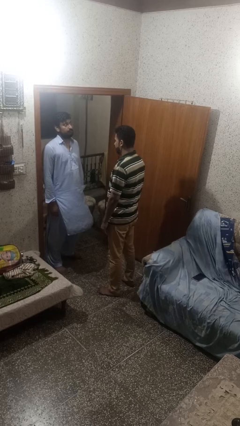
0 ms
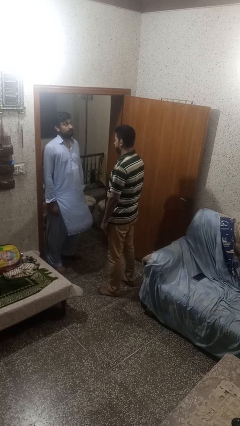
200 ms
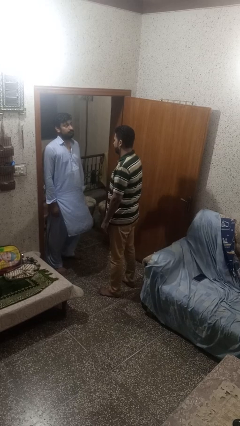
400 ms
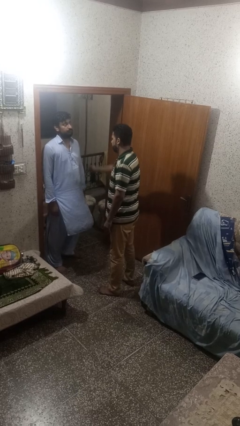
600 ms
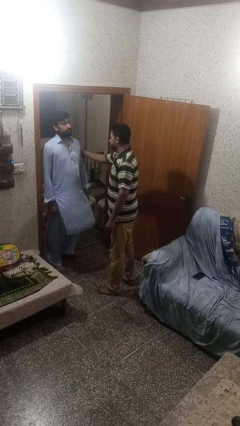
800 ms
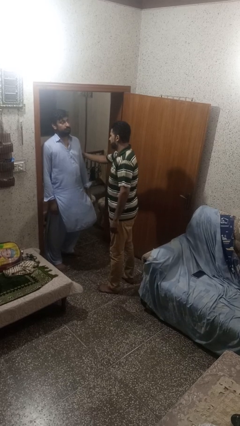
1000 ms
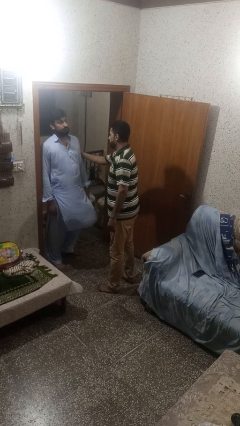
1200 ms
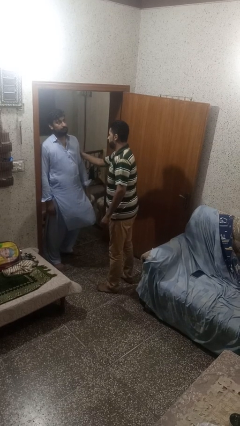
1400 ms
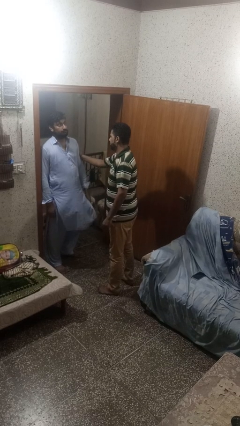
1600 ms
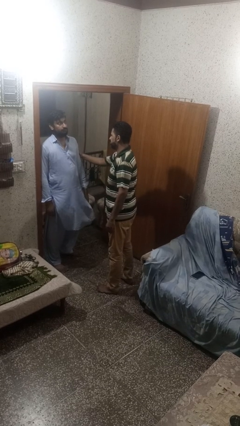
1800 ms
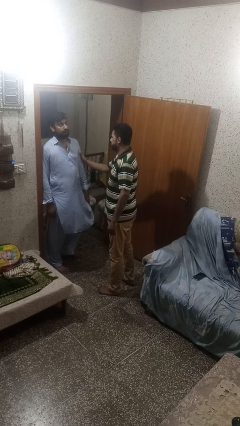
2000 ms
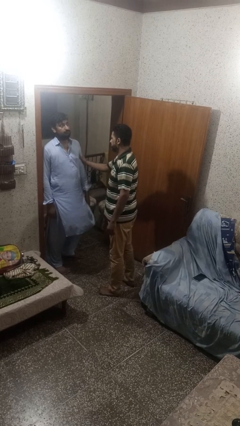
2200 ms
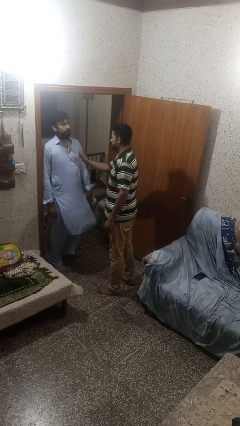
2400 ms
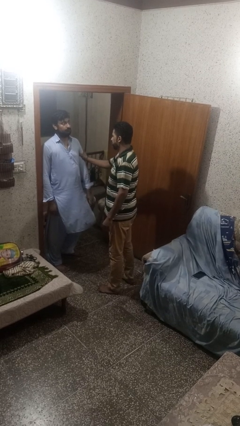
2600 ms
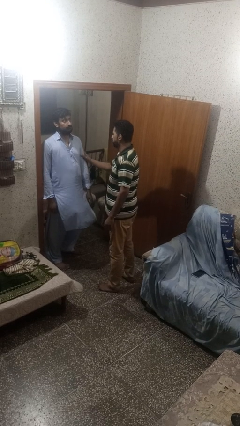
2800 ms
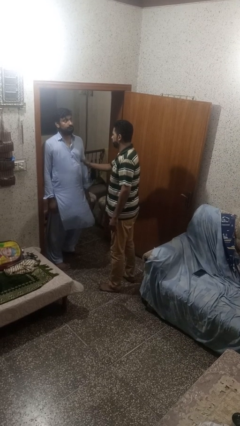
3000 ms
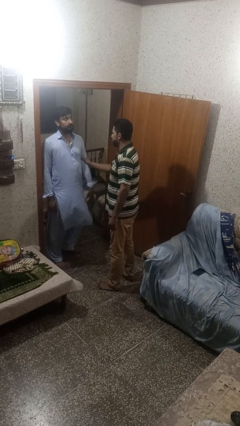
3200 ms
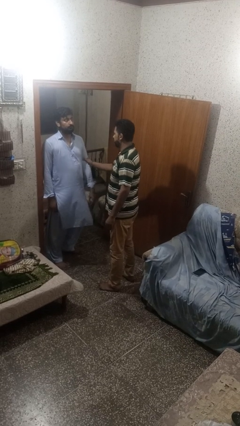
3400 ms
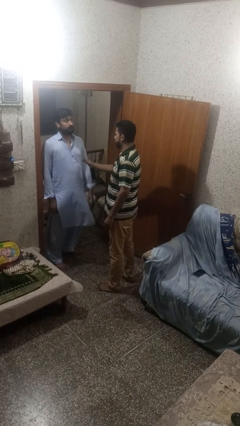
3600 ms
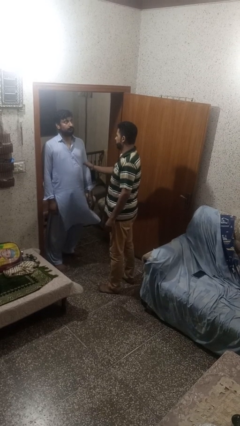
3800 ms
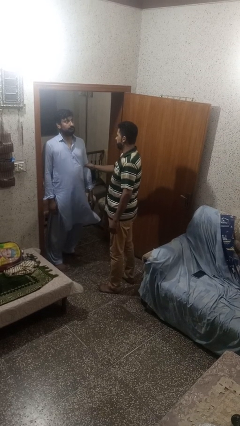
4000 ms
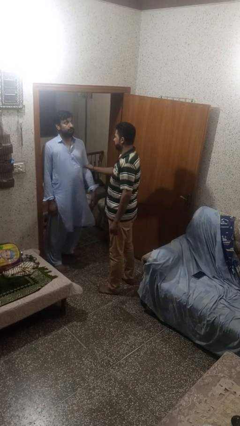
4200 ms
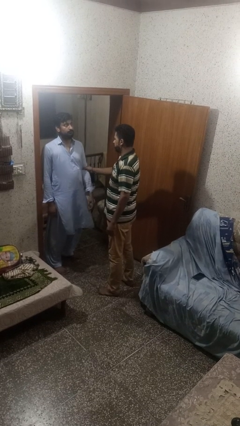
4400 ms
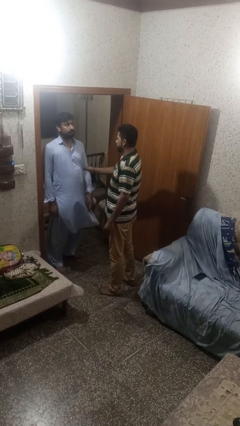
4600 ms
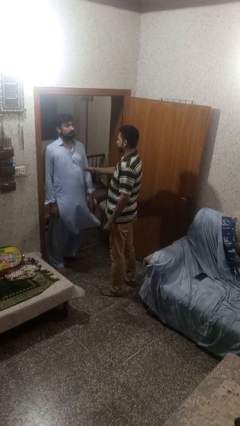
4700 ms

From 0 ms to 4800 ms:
person grabs person by bicep

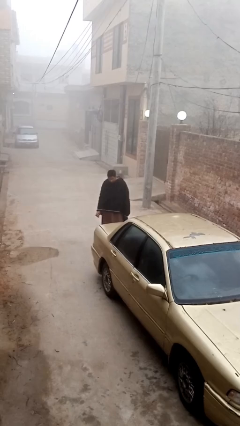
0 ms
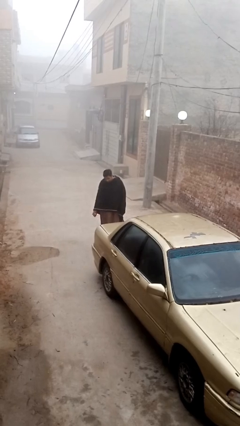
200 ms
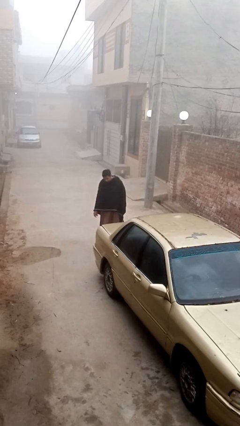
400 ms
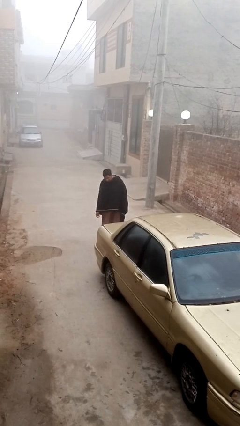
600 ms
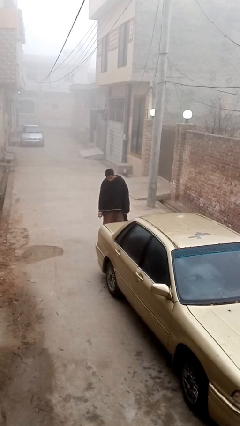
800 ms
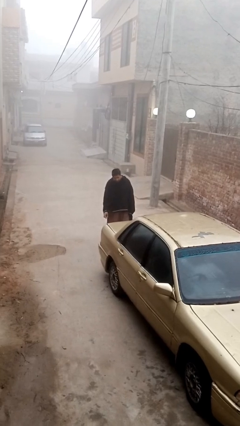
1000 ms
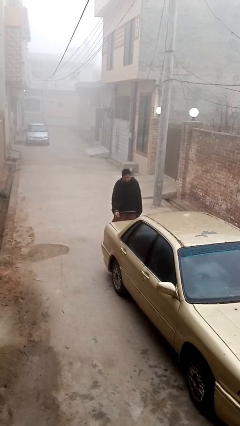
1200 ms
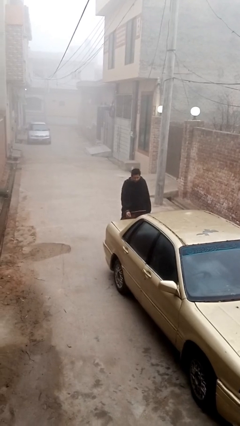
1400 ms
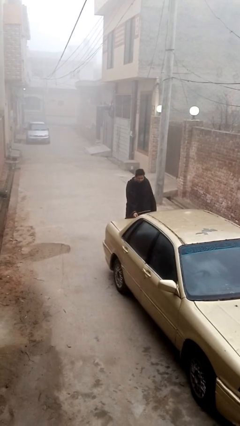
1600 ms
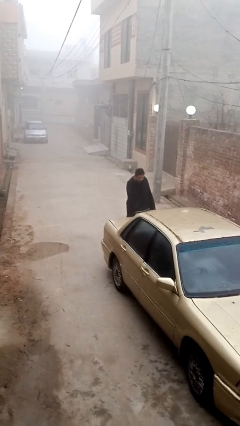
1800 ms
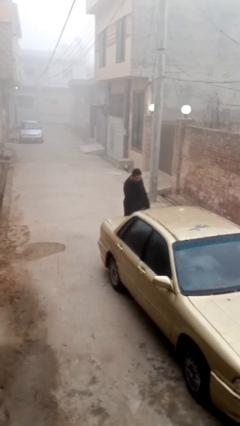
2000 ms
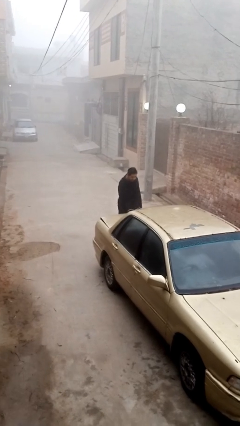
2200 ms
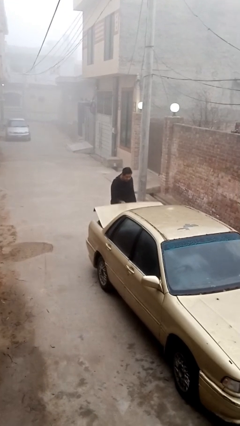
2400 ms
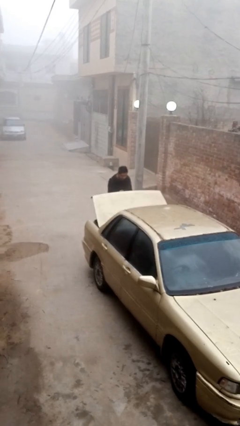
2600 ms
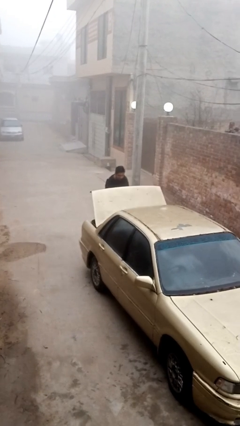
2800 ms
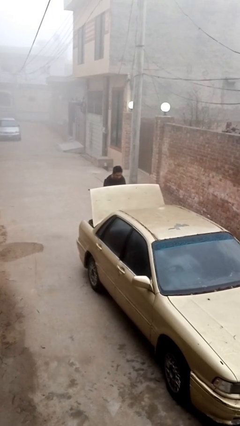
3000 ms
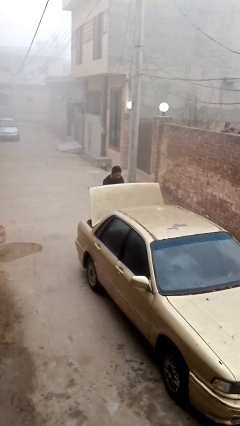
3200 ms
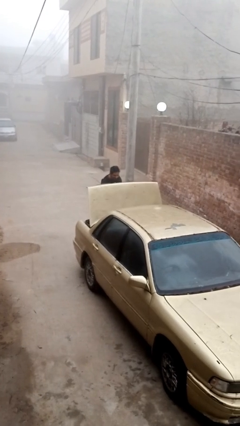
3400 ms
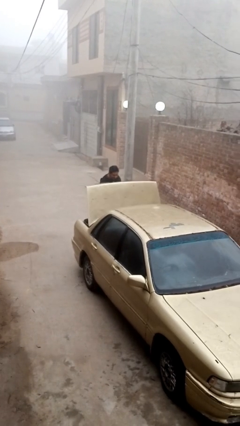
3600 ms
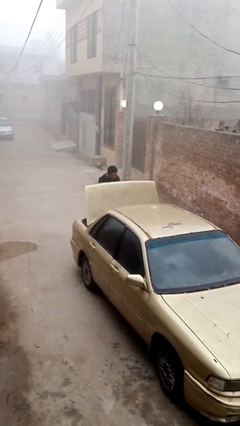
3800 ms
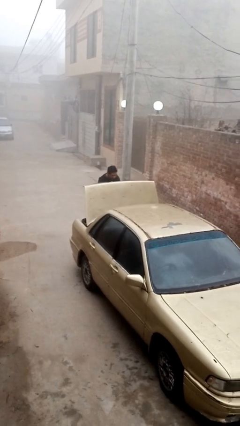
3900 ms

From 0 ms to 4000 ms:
person opens car trunk

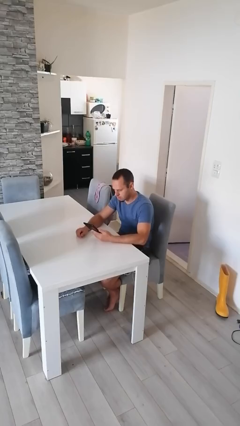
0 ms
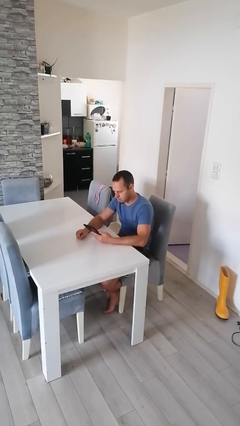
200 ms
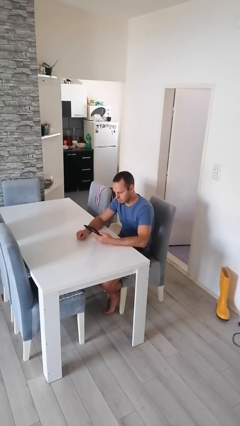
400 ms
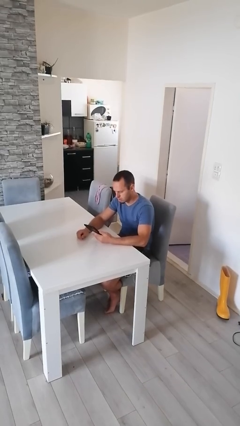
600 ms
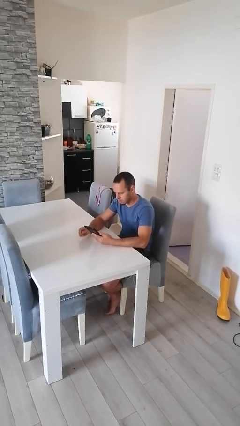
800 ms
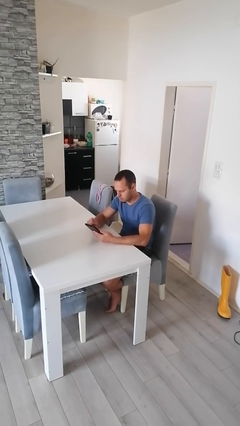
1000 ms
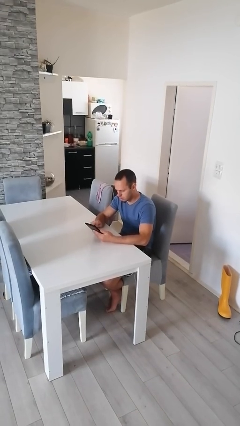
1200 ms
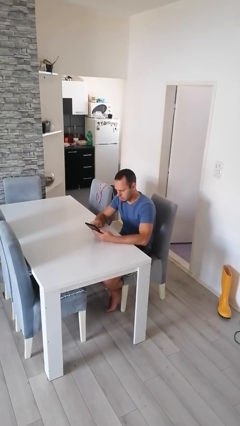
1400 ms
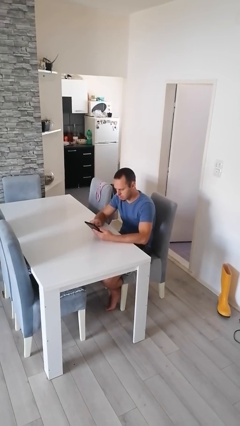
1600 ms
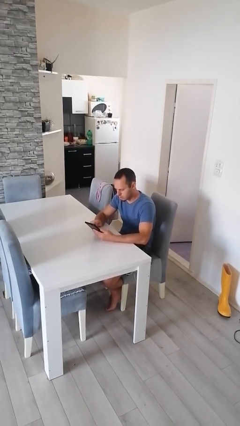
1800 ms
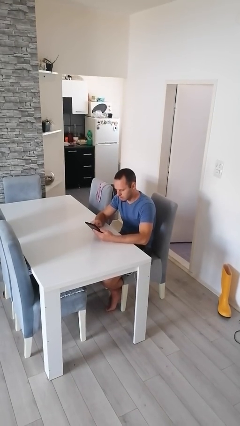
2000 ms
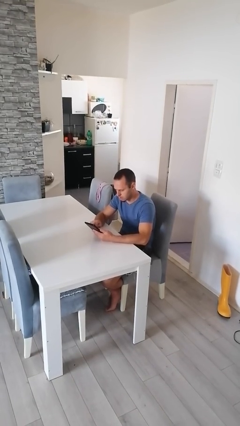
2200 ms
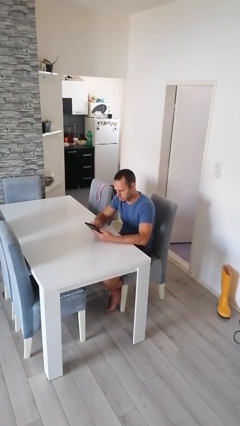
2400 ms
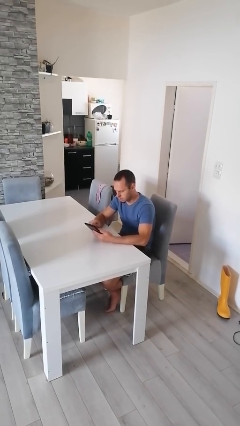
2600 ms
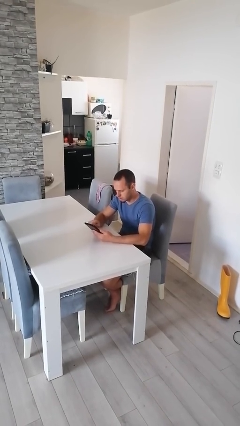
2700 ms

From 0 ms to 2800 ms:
person interacts with tablet

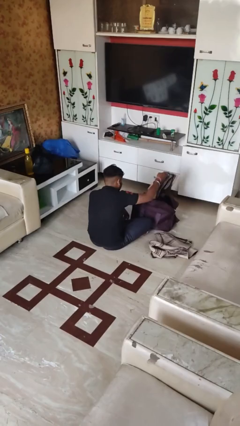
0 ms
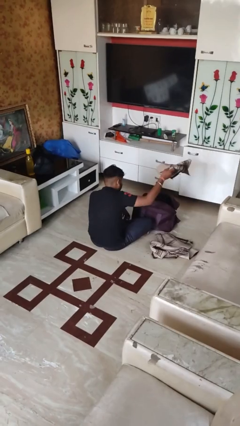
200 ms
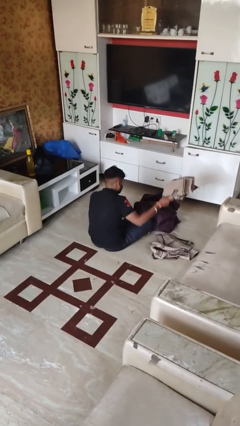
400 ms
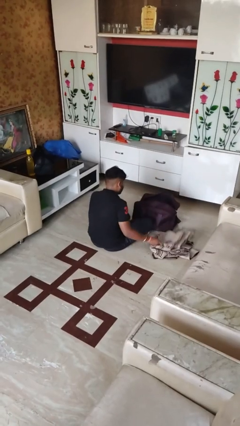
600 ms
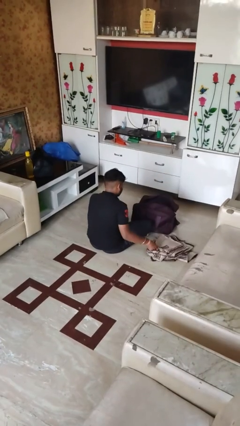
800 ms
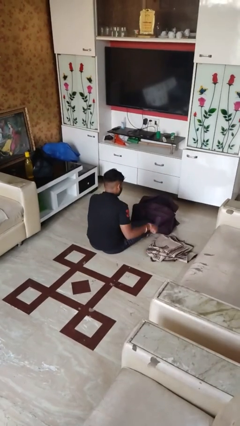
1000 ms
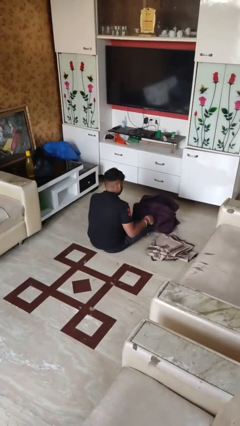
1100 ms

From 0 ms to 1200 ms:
person unloads clothes from suitcase

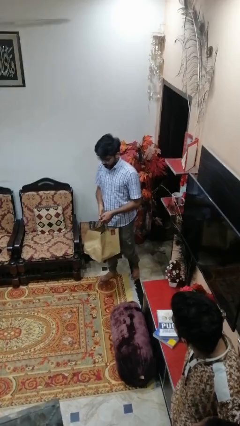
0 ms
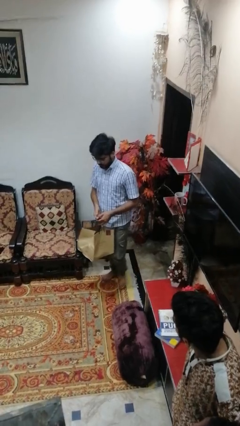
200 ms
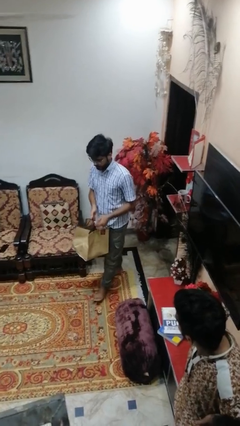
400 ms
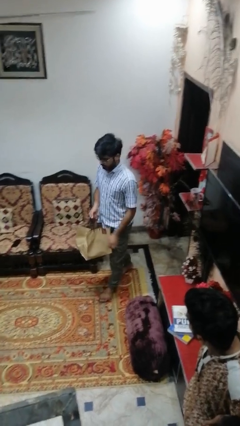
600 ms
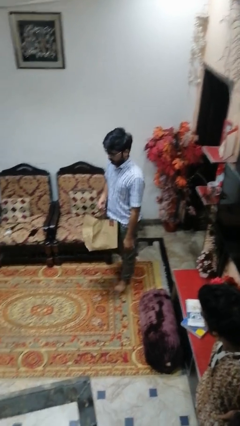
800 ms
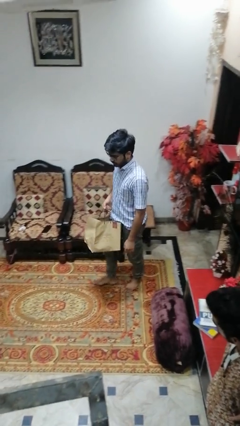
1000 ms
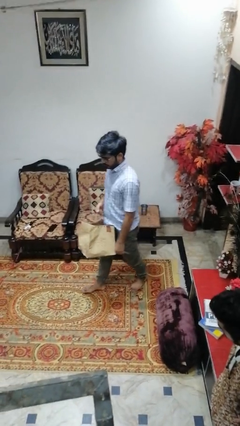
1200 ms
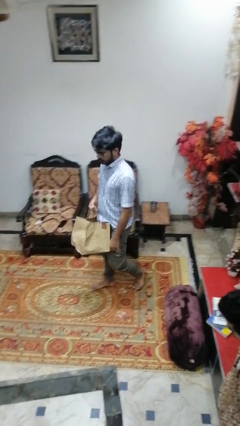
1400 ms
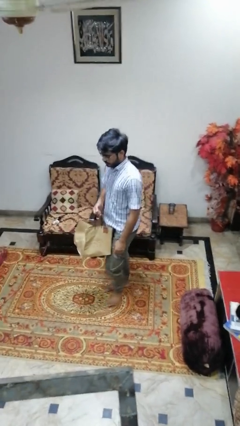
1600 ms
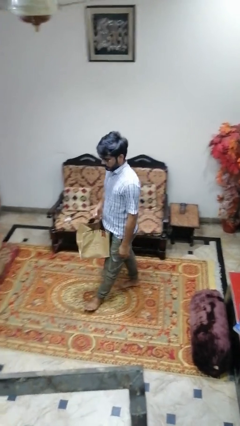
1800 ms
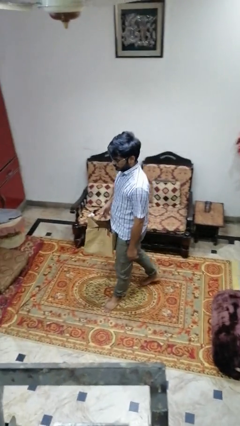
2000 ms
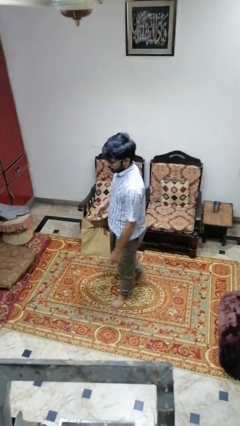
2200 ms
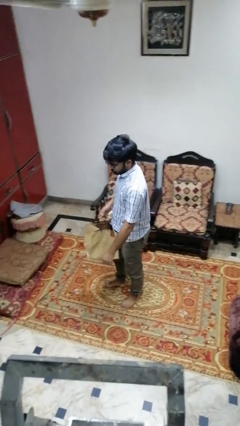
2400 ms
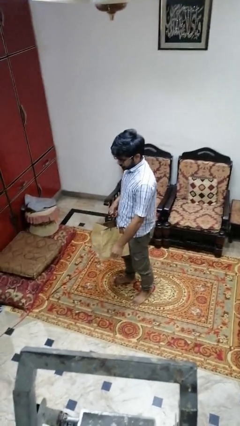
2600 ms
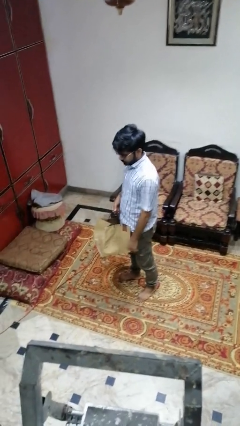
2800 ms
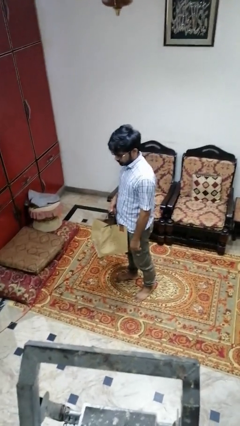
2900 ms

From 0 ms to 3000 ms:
person carries groceries

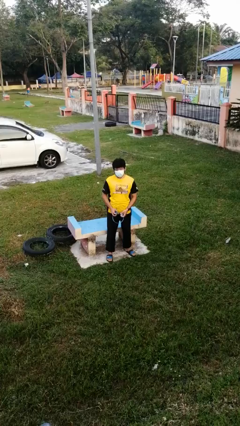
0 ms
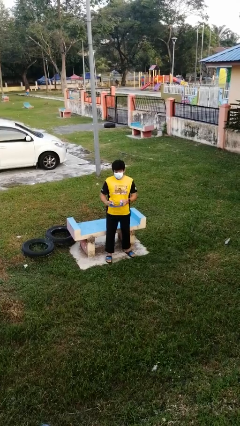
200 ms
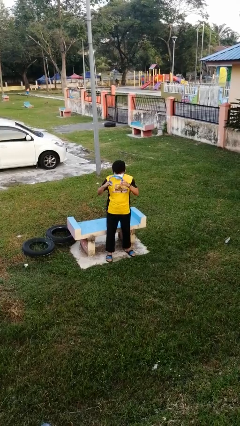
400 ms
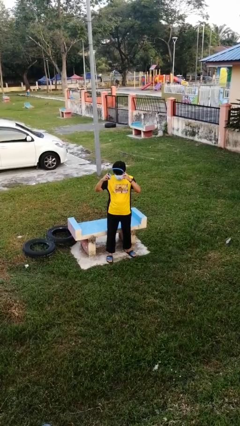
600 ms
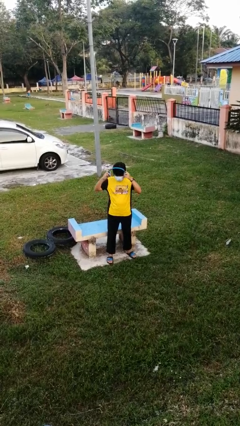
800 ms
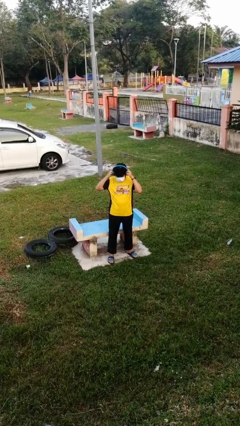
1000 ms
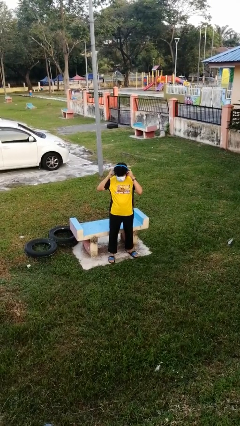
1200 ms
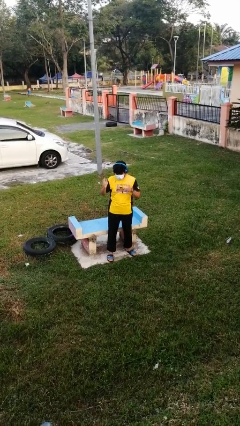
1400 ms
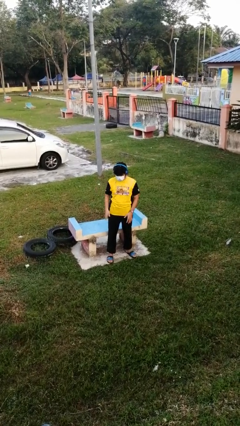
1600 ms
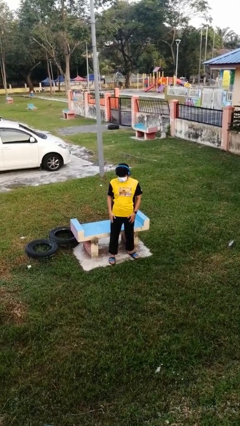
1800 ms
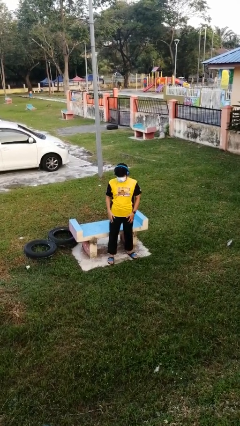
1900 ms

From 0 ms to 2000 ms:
person puts on headphones
